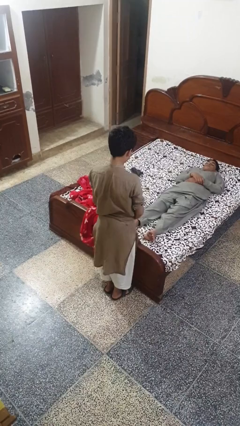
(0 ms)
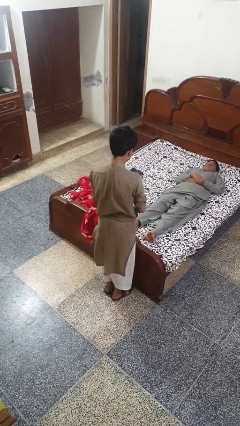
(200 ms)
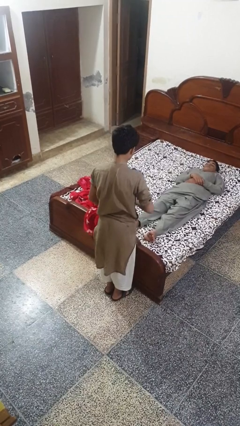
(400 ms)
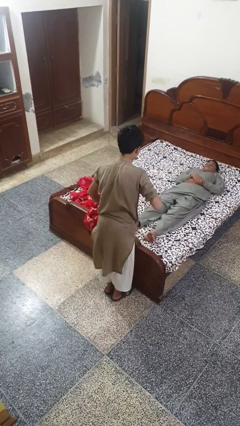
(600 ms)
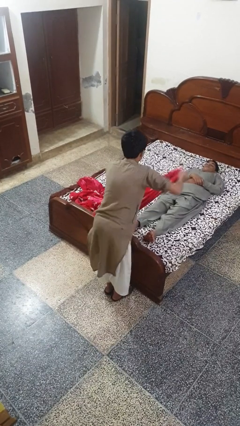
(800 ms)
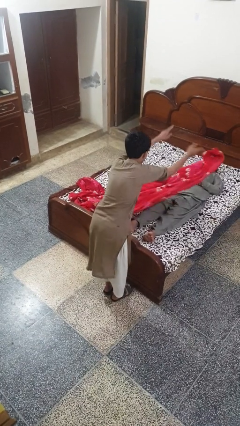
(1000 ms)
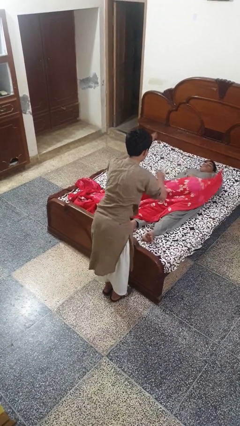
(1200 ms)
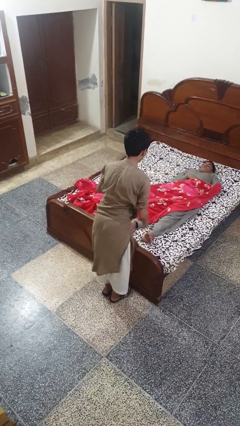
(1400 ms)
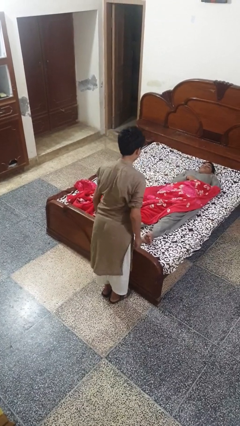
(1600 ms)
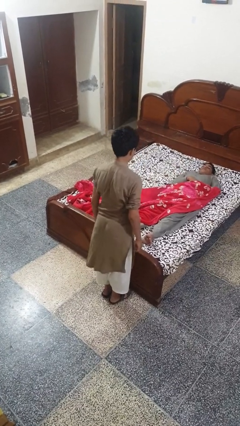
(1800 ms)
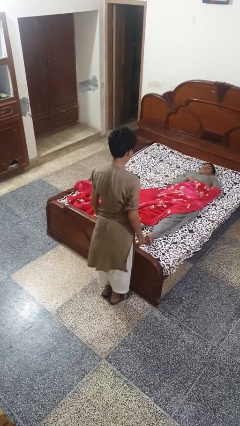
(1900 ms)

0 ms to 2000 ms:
person covers friend with blanket

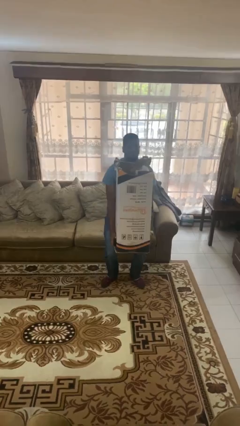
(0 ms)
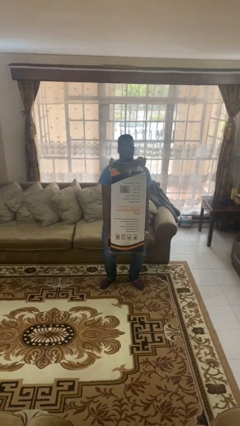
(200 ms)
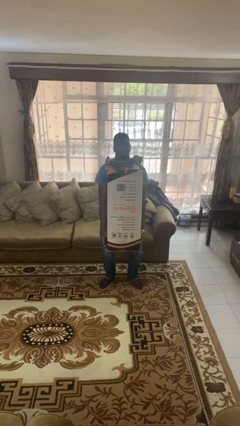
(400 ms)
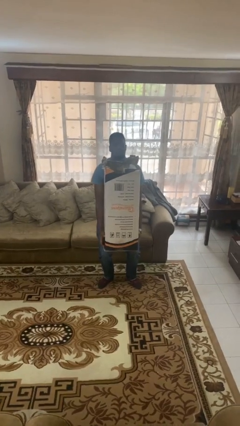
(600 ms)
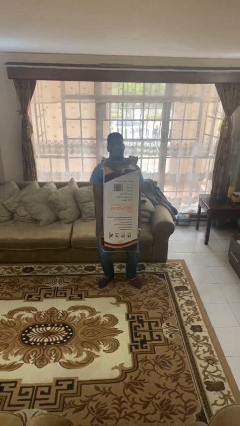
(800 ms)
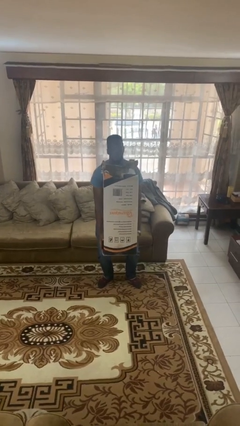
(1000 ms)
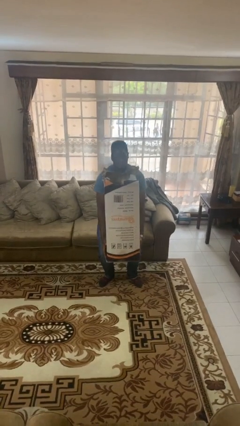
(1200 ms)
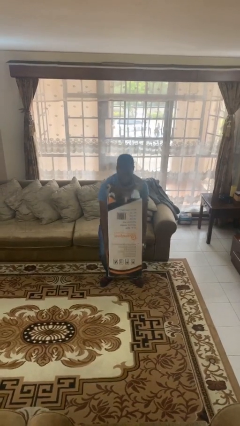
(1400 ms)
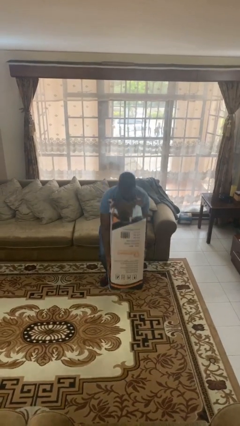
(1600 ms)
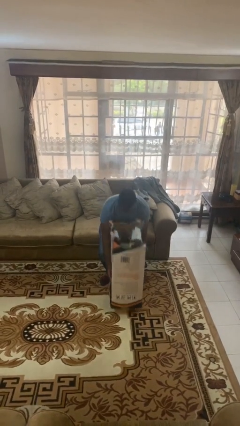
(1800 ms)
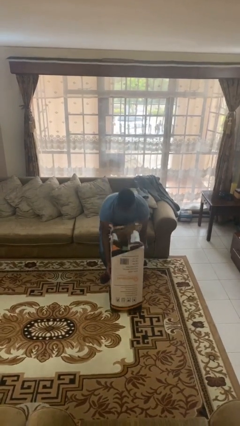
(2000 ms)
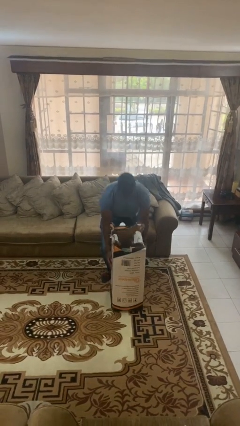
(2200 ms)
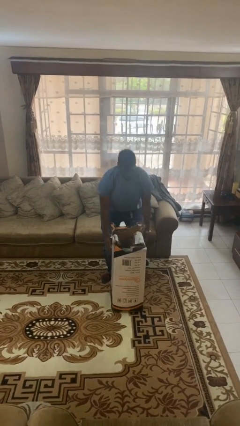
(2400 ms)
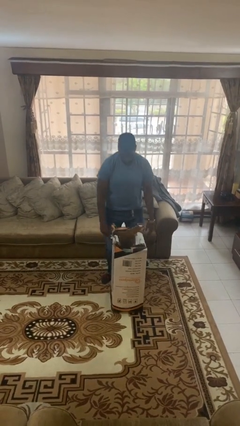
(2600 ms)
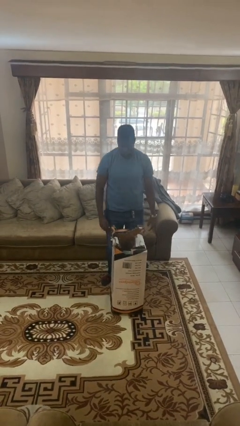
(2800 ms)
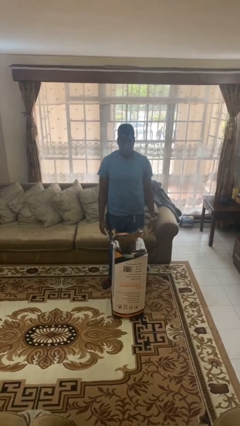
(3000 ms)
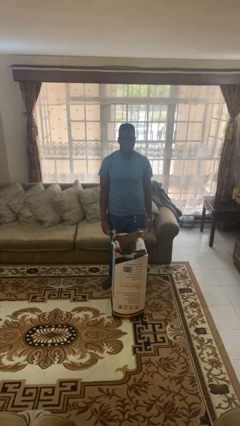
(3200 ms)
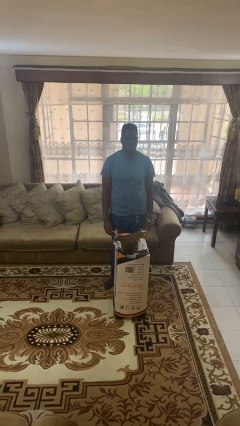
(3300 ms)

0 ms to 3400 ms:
person puts down object on floor

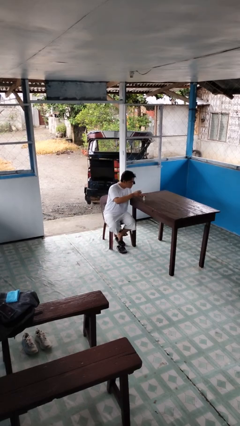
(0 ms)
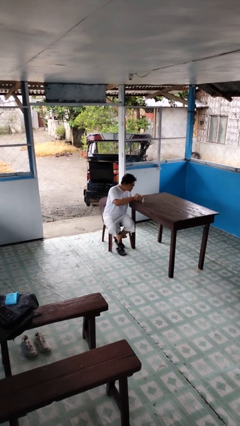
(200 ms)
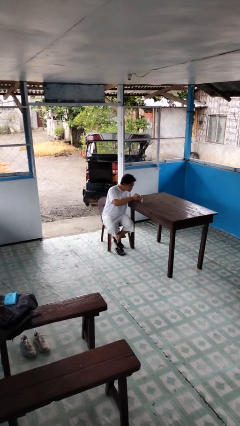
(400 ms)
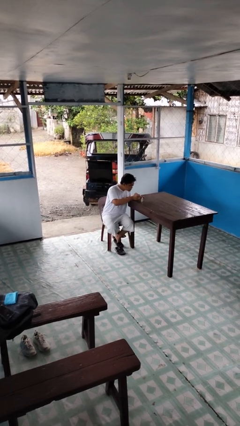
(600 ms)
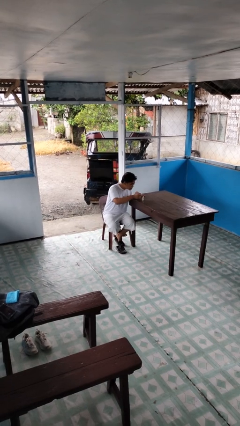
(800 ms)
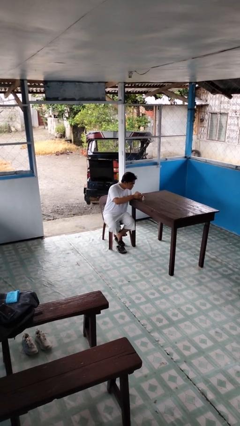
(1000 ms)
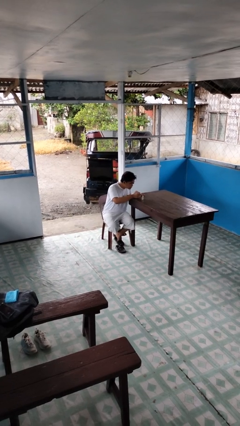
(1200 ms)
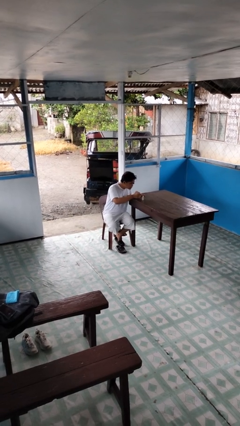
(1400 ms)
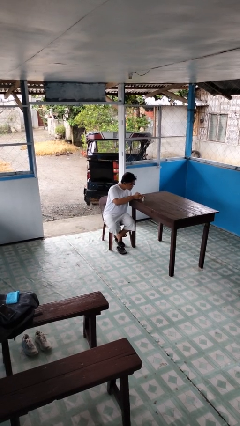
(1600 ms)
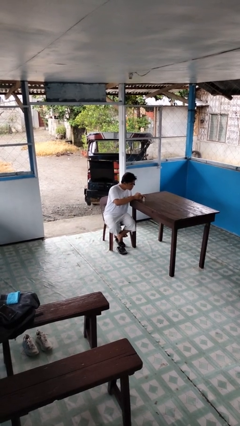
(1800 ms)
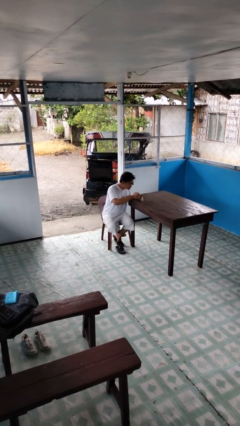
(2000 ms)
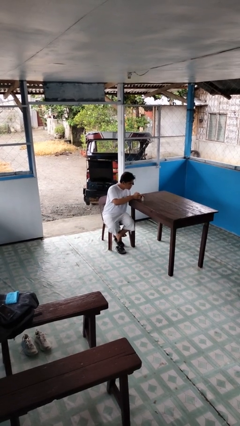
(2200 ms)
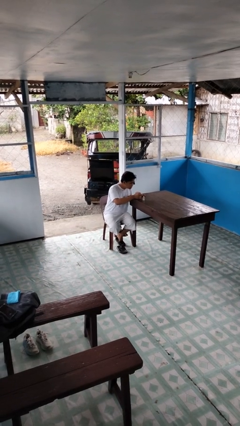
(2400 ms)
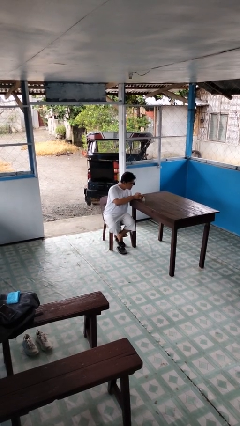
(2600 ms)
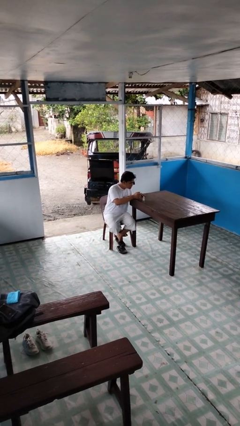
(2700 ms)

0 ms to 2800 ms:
person paints fingernails

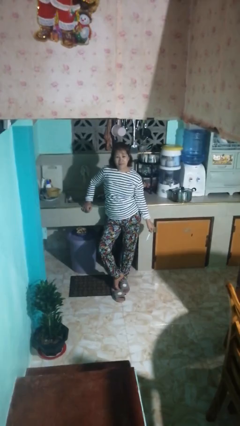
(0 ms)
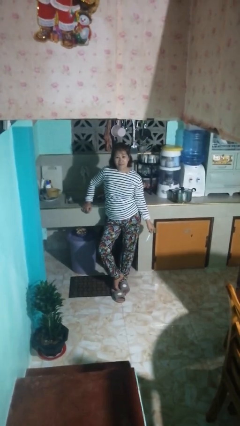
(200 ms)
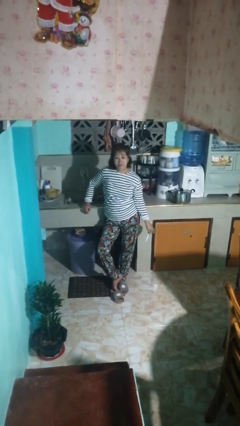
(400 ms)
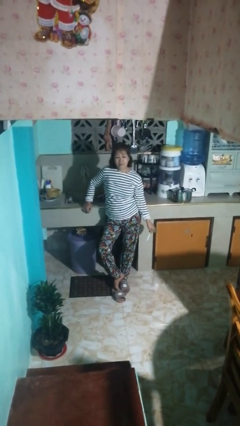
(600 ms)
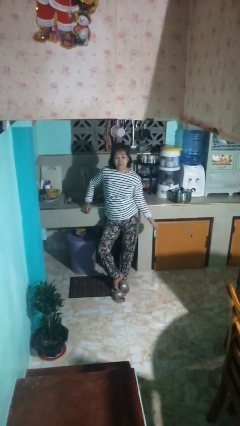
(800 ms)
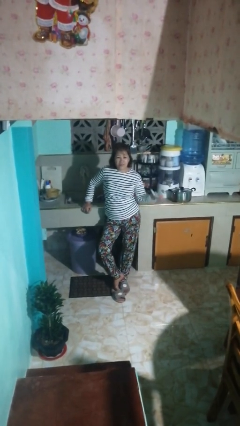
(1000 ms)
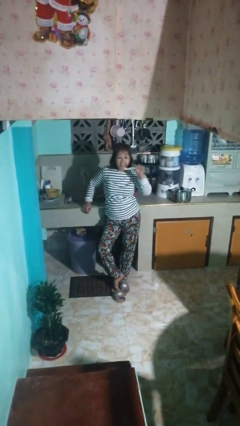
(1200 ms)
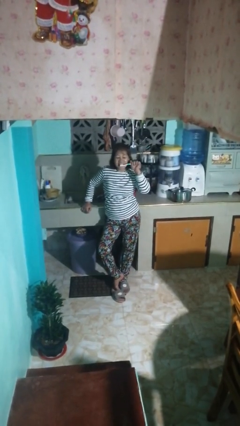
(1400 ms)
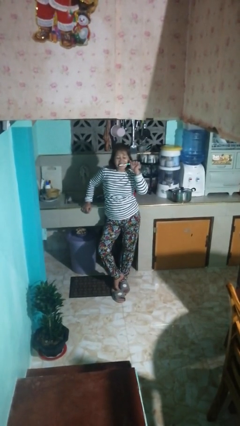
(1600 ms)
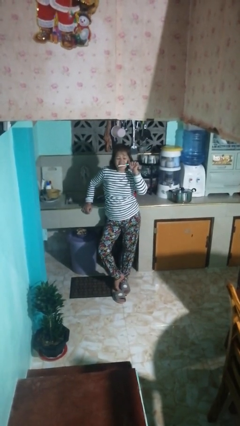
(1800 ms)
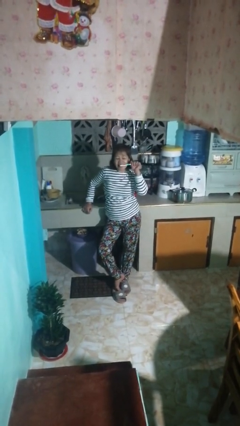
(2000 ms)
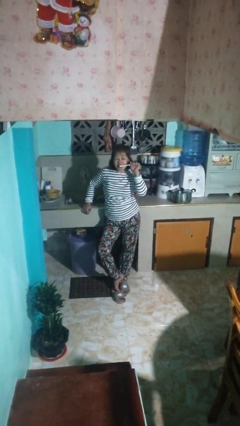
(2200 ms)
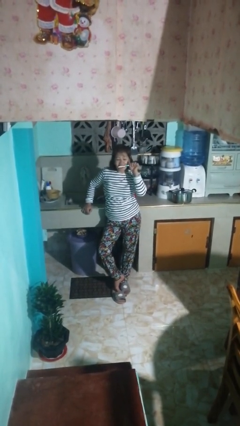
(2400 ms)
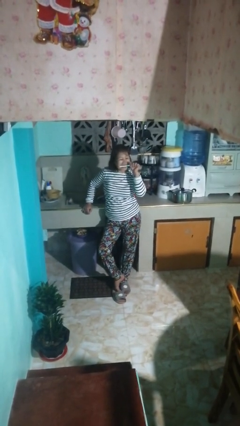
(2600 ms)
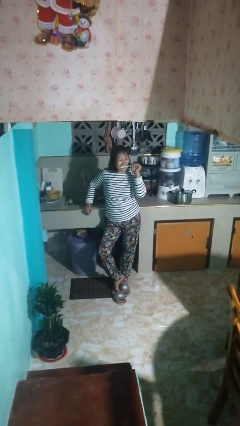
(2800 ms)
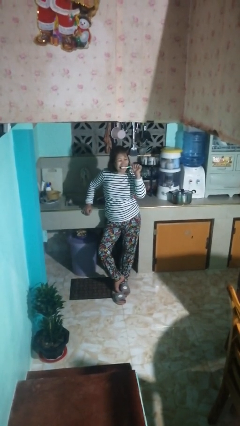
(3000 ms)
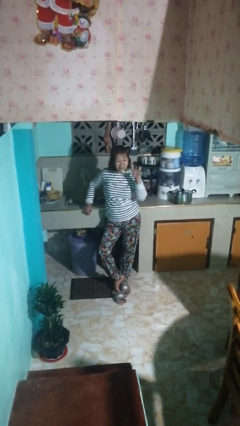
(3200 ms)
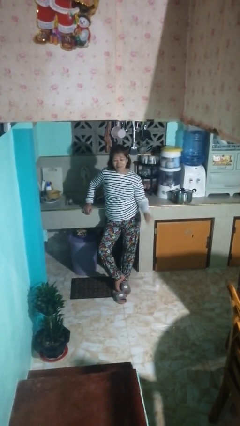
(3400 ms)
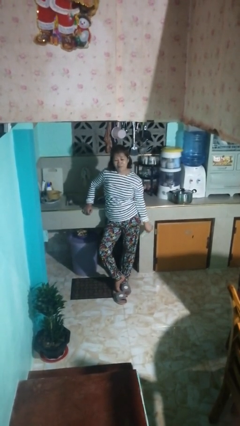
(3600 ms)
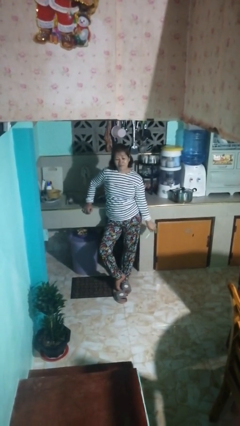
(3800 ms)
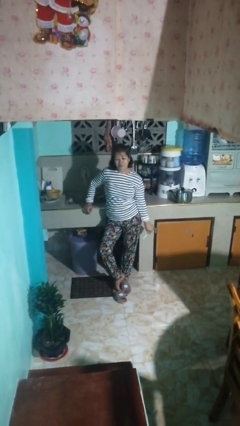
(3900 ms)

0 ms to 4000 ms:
person brushes teeth

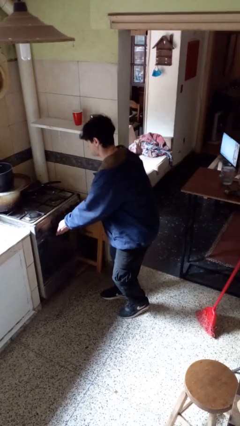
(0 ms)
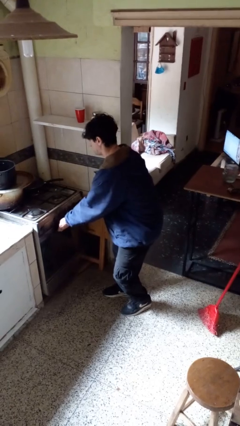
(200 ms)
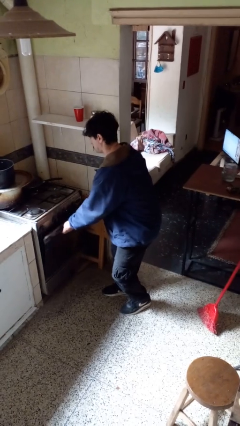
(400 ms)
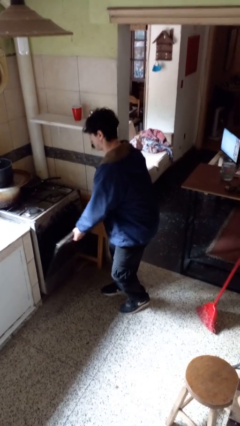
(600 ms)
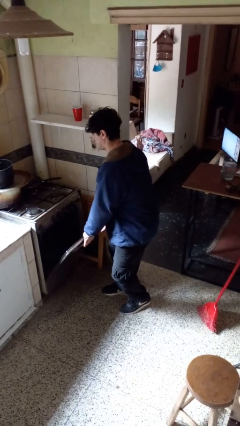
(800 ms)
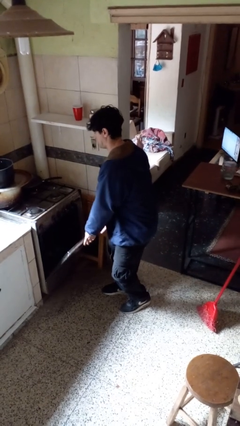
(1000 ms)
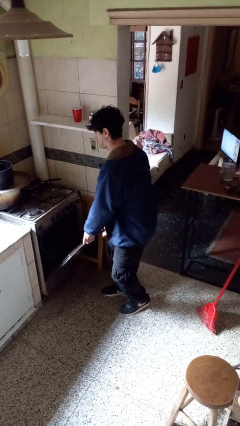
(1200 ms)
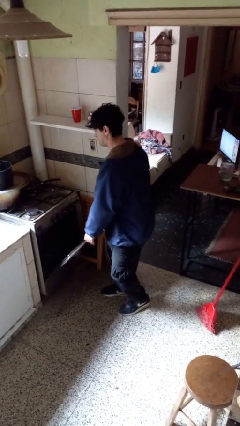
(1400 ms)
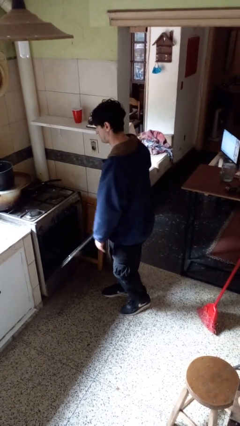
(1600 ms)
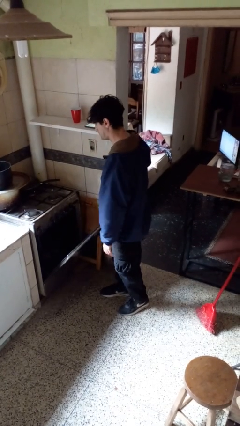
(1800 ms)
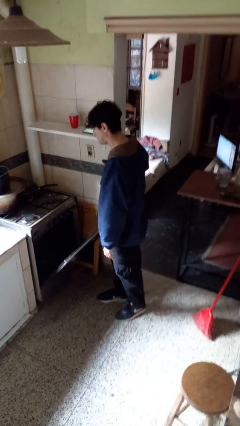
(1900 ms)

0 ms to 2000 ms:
person opens oven door

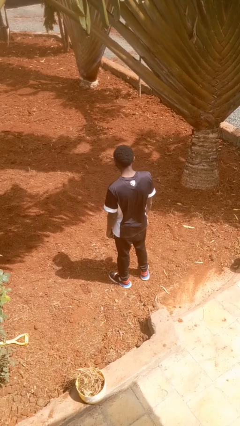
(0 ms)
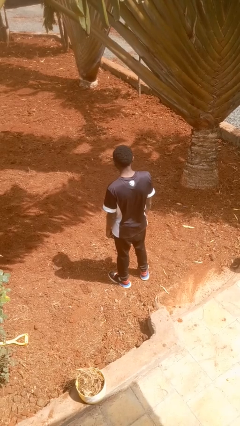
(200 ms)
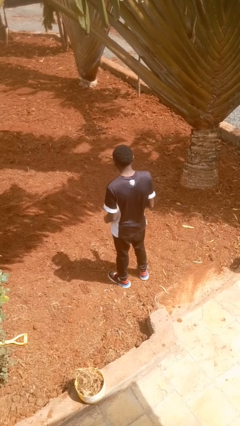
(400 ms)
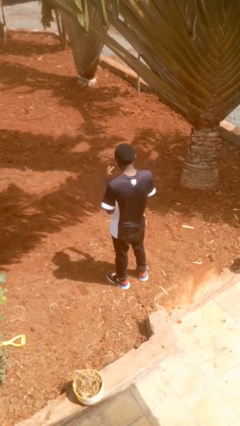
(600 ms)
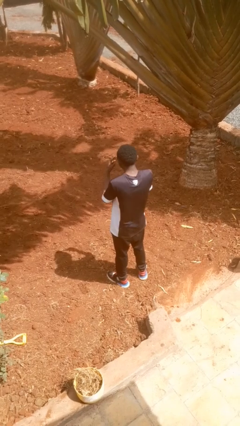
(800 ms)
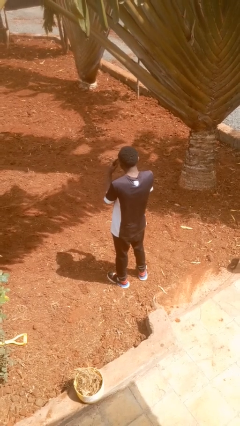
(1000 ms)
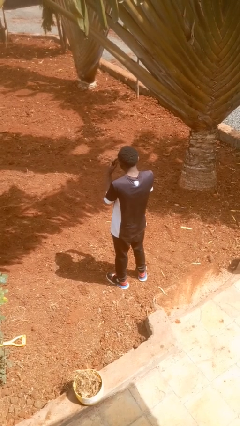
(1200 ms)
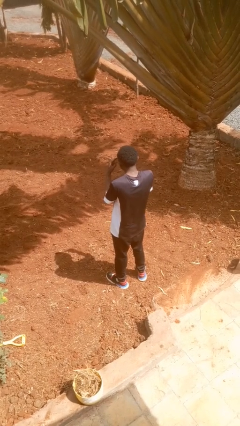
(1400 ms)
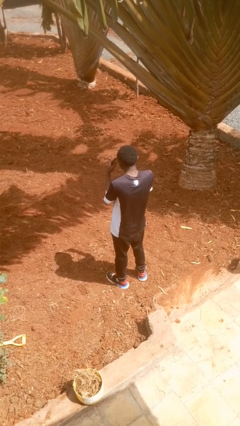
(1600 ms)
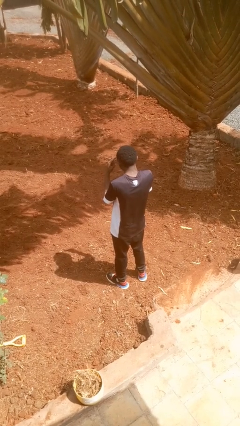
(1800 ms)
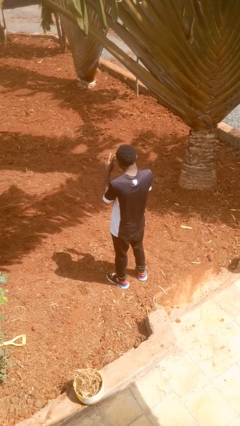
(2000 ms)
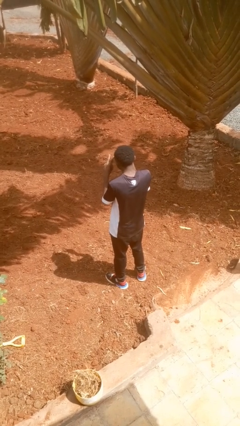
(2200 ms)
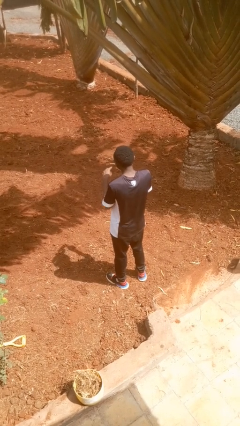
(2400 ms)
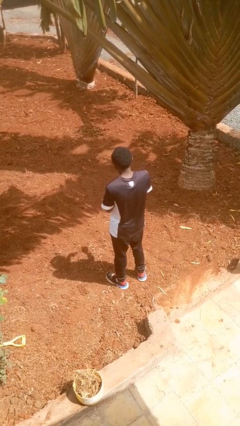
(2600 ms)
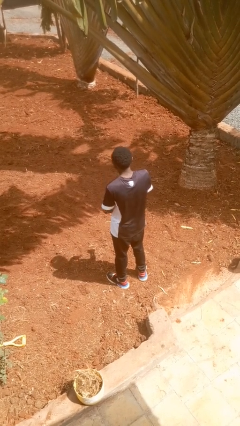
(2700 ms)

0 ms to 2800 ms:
person gestures watch closely
